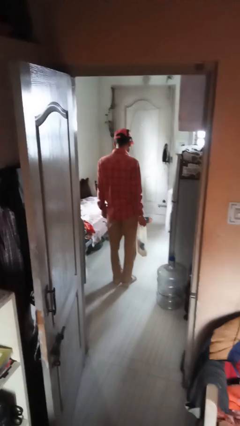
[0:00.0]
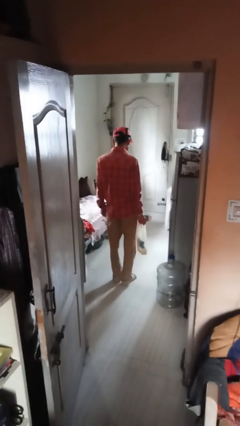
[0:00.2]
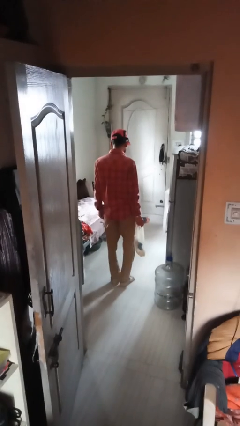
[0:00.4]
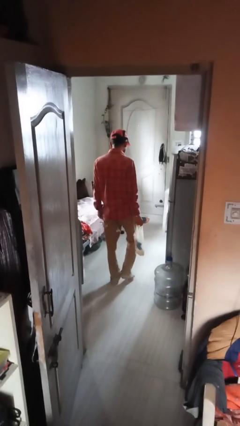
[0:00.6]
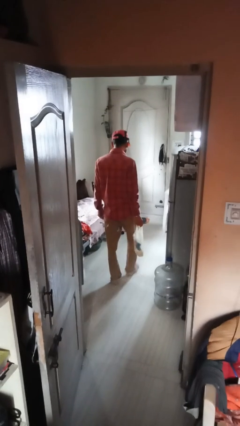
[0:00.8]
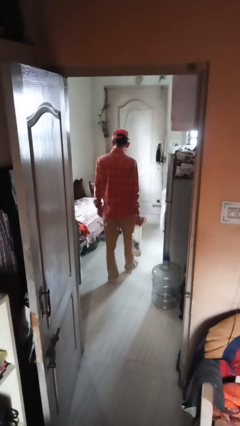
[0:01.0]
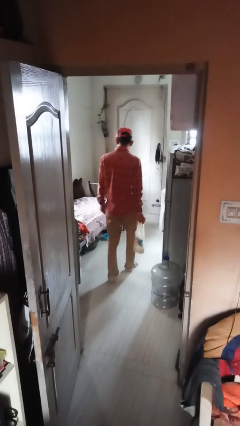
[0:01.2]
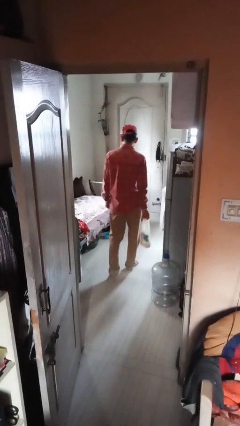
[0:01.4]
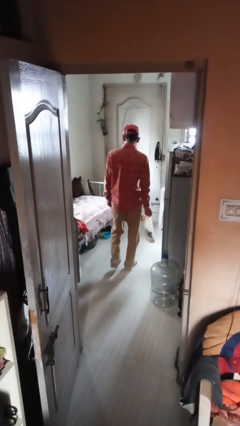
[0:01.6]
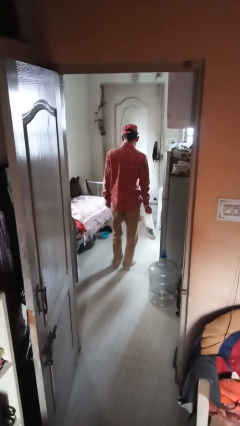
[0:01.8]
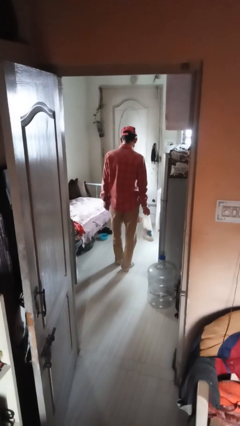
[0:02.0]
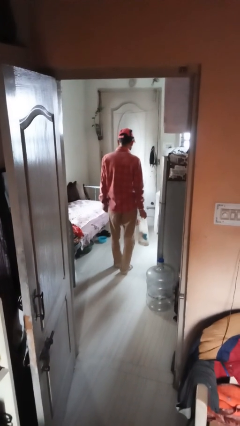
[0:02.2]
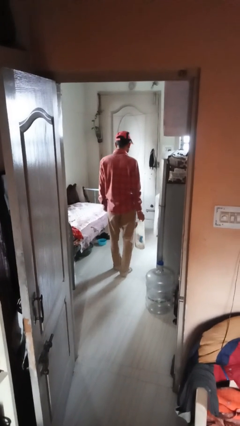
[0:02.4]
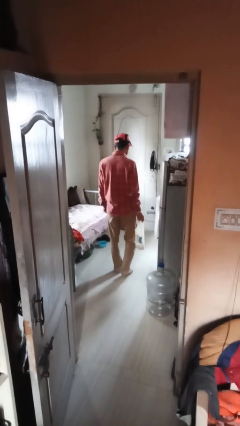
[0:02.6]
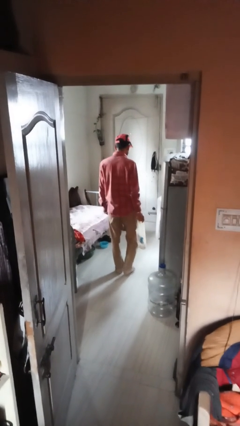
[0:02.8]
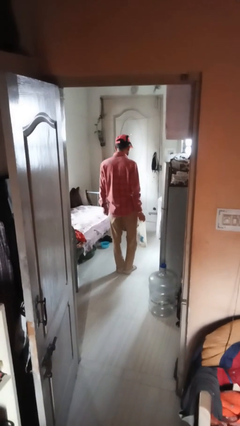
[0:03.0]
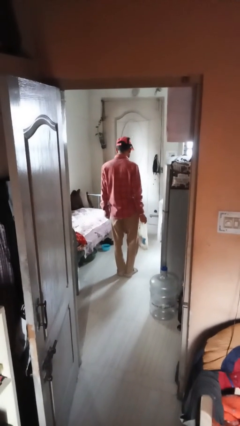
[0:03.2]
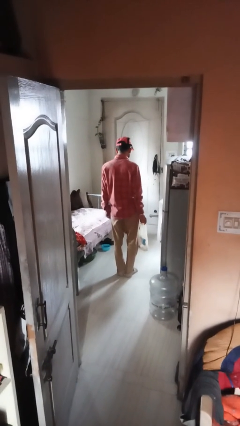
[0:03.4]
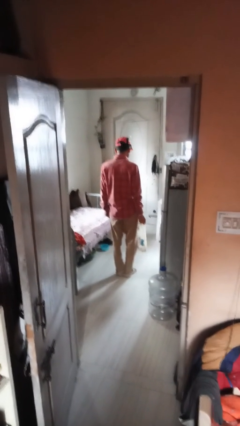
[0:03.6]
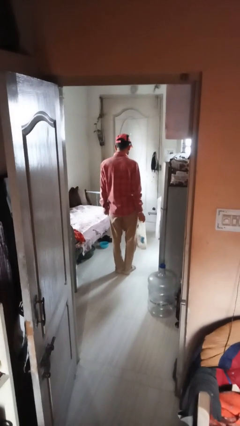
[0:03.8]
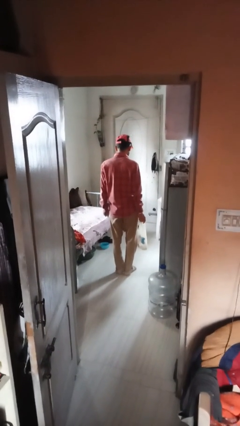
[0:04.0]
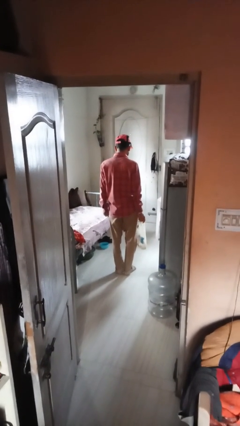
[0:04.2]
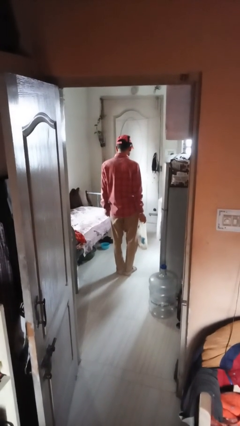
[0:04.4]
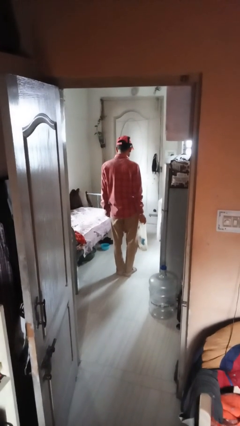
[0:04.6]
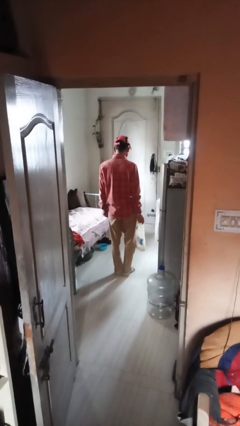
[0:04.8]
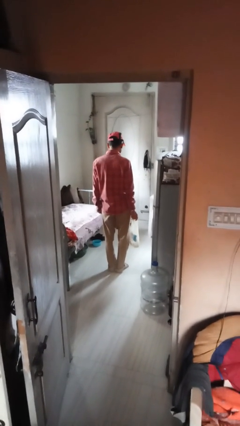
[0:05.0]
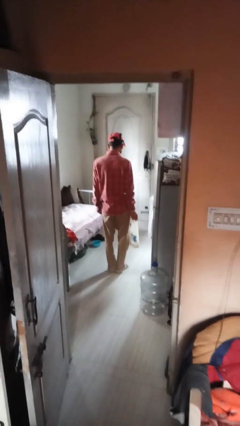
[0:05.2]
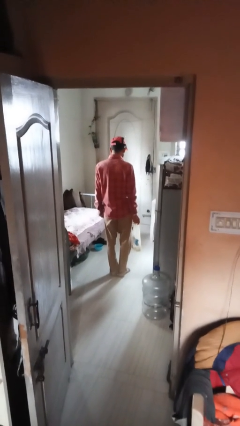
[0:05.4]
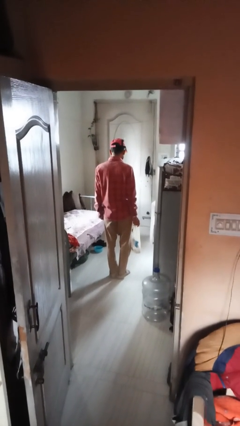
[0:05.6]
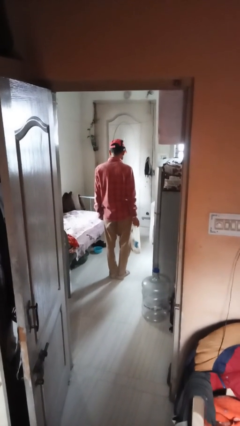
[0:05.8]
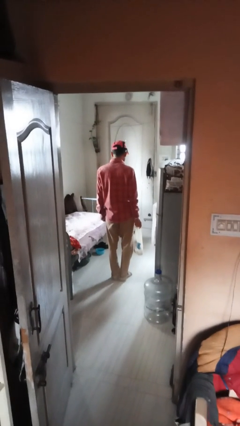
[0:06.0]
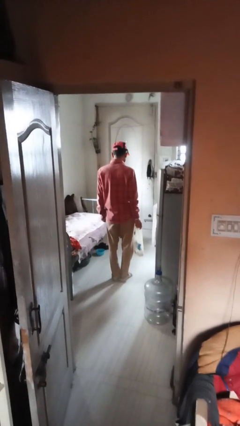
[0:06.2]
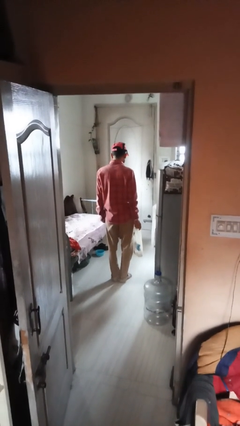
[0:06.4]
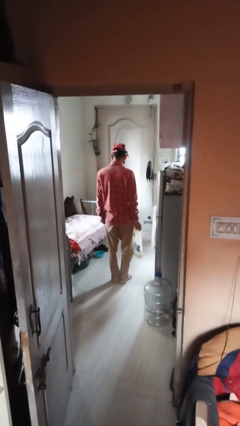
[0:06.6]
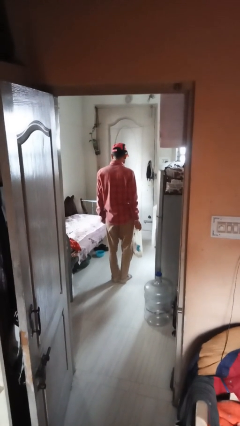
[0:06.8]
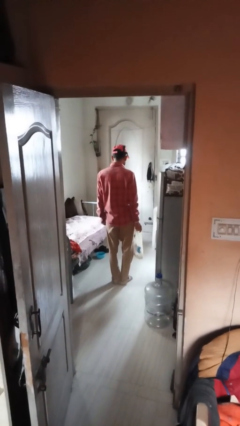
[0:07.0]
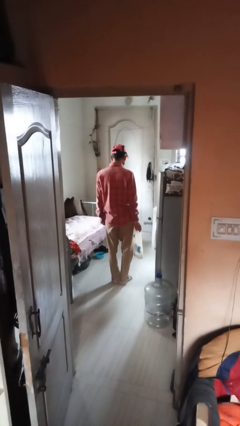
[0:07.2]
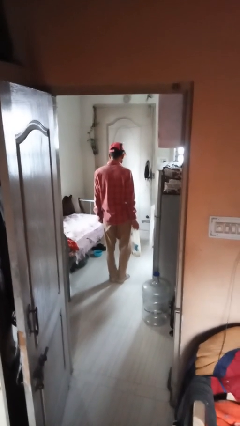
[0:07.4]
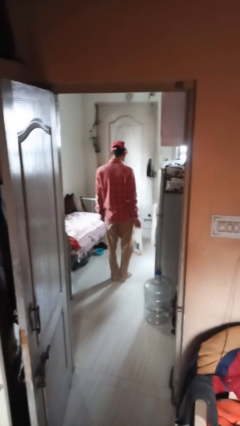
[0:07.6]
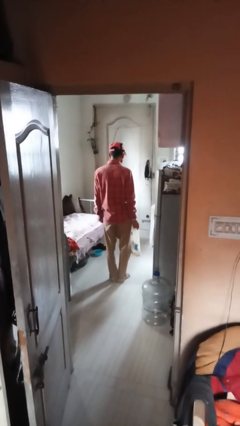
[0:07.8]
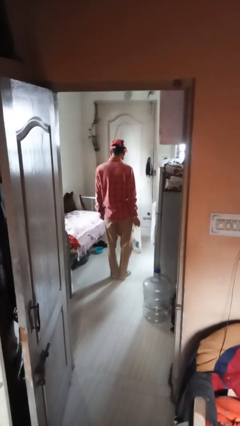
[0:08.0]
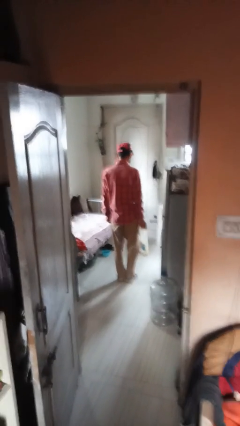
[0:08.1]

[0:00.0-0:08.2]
person carries groceries

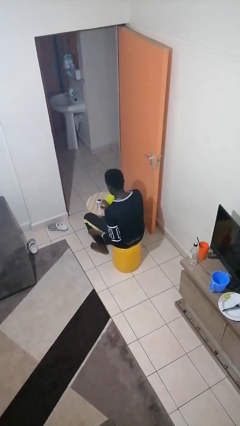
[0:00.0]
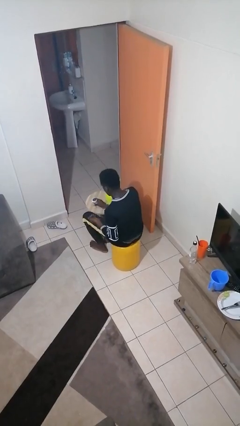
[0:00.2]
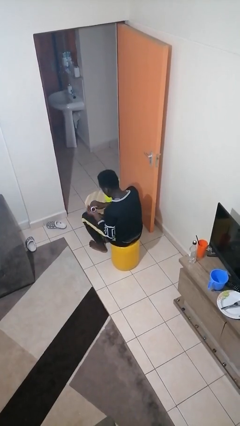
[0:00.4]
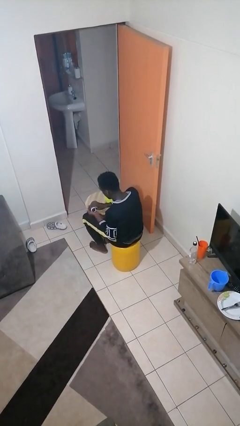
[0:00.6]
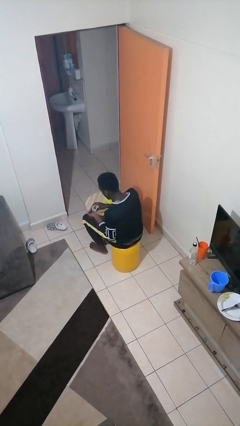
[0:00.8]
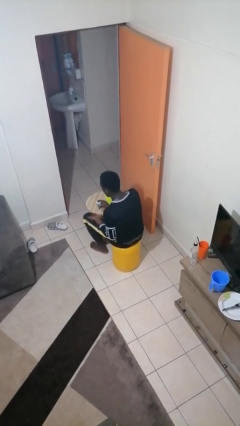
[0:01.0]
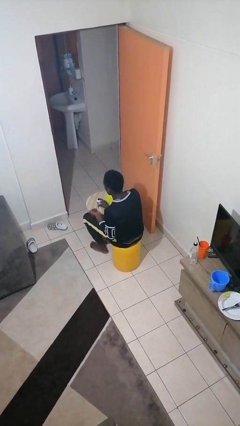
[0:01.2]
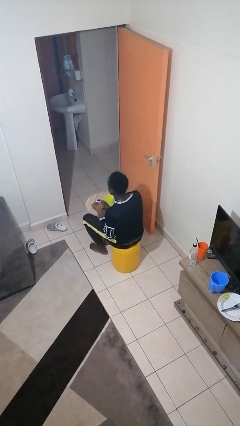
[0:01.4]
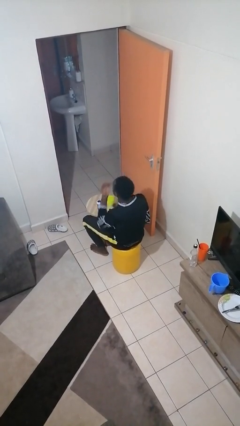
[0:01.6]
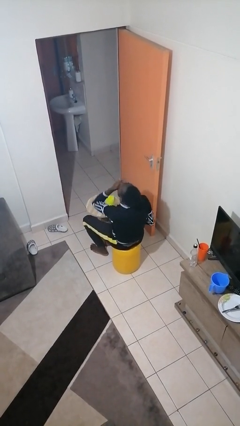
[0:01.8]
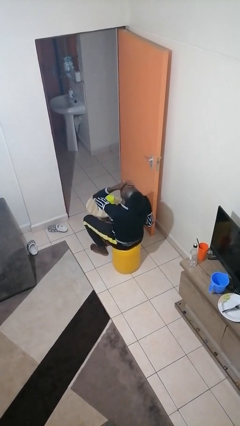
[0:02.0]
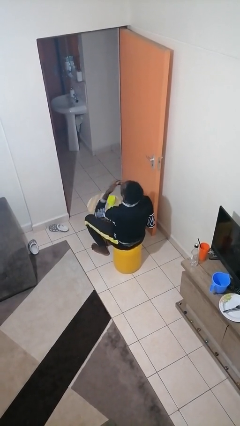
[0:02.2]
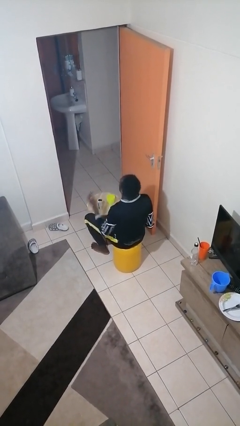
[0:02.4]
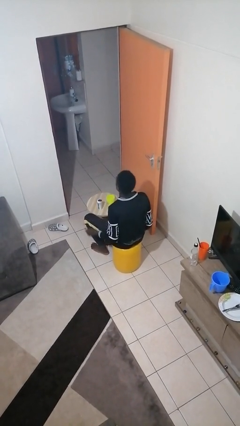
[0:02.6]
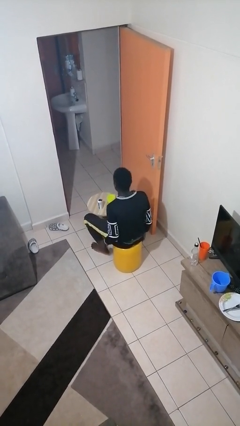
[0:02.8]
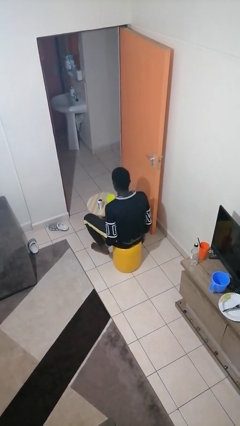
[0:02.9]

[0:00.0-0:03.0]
person takes medicine pills

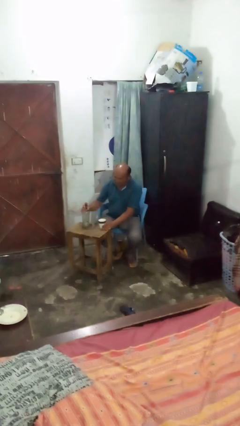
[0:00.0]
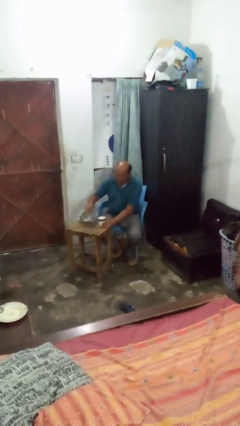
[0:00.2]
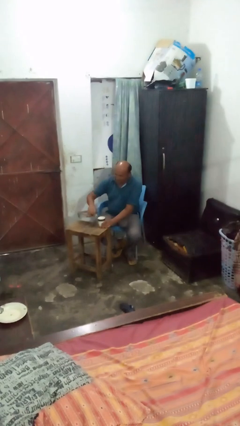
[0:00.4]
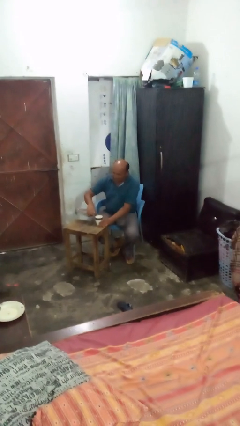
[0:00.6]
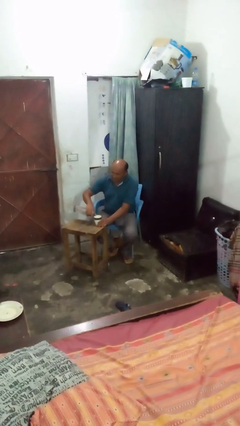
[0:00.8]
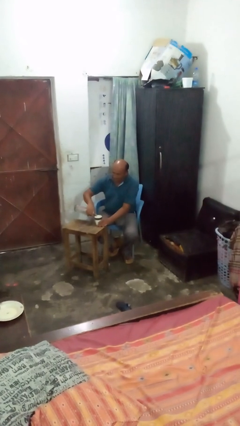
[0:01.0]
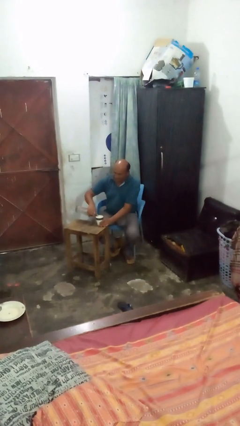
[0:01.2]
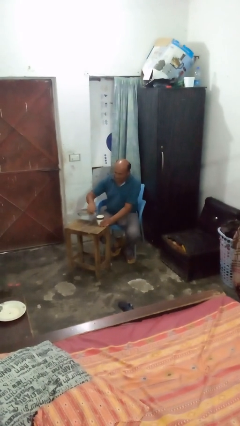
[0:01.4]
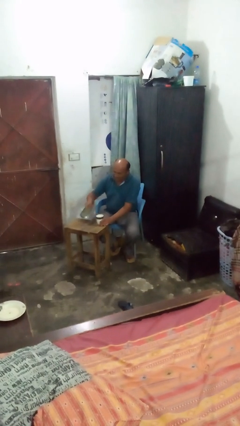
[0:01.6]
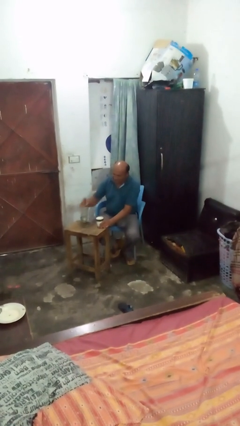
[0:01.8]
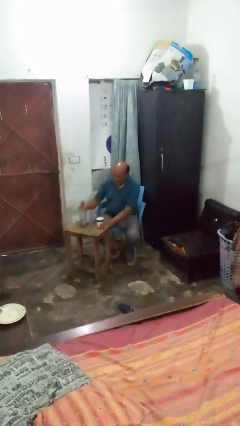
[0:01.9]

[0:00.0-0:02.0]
person pours liquid into cup

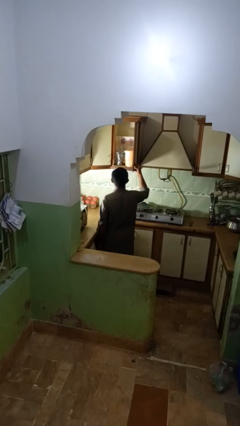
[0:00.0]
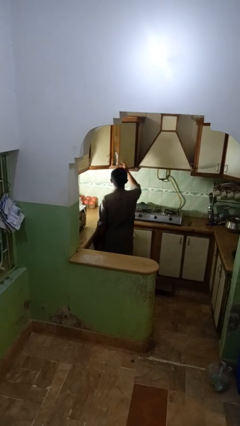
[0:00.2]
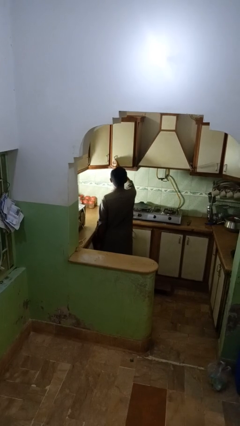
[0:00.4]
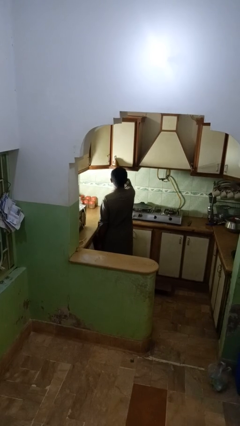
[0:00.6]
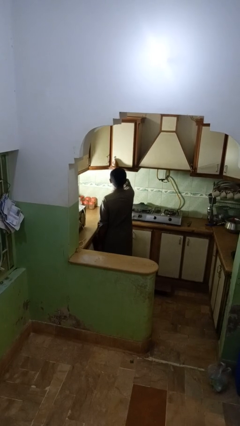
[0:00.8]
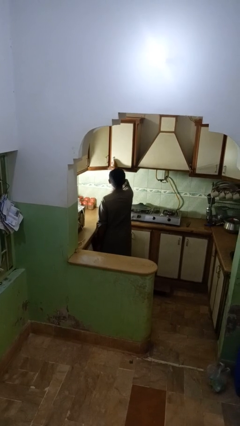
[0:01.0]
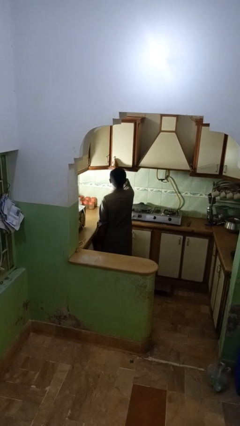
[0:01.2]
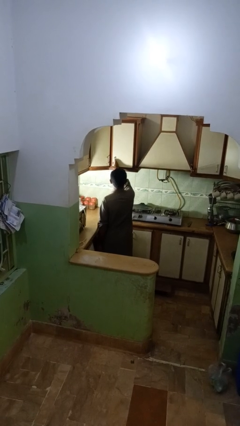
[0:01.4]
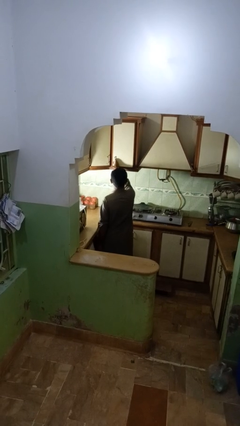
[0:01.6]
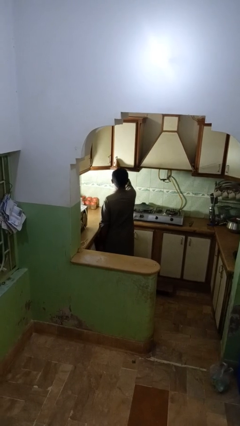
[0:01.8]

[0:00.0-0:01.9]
person closes kitchen drawer

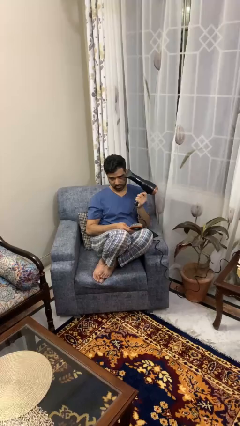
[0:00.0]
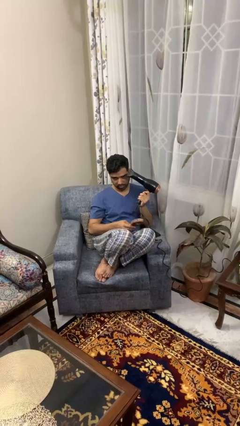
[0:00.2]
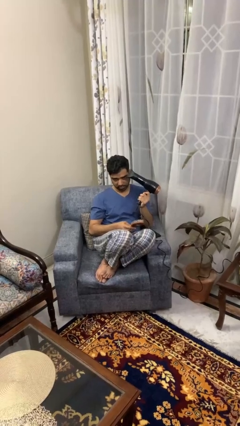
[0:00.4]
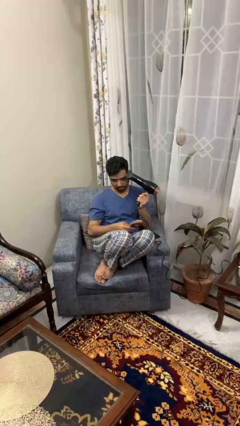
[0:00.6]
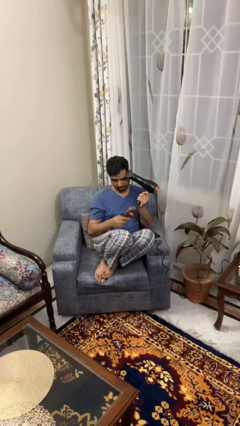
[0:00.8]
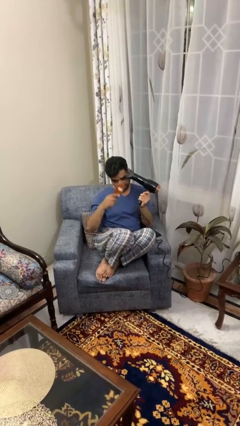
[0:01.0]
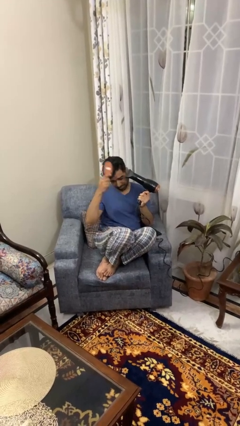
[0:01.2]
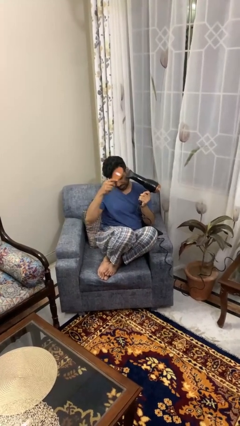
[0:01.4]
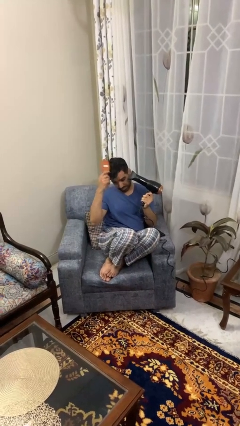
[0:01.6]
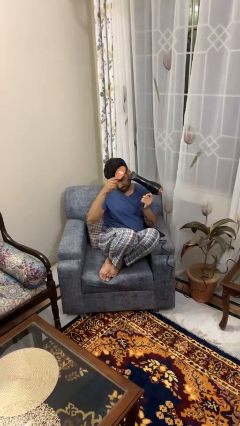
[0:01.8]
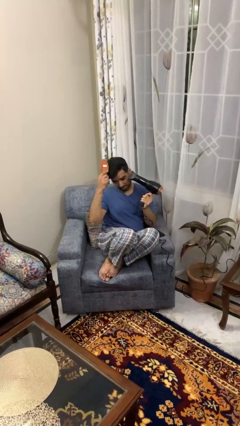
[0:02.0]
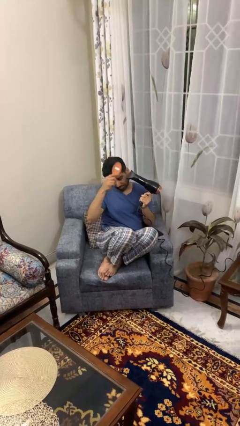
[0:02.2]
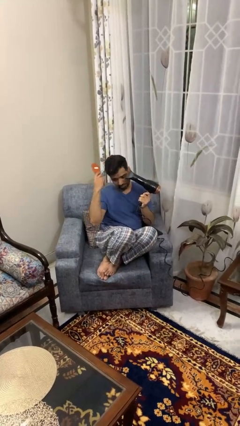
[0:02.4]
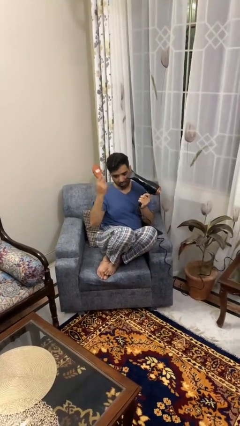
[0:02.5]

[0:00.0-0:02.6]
person dries hair with hairdryer
